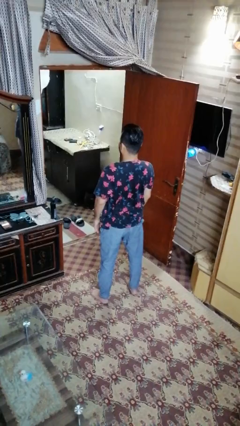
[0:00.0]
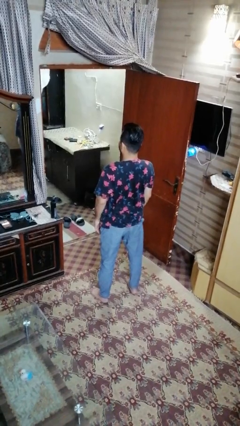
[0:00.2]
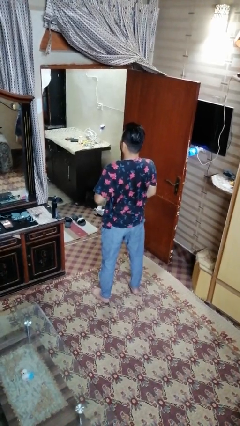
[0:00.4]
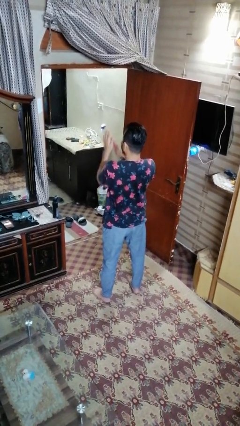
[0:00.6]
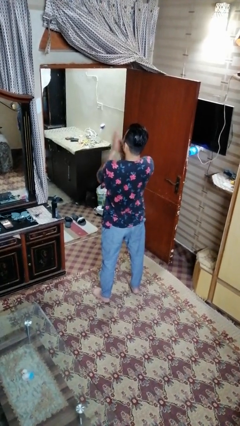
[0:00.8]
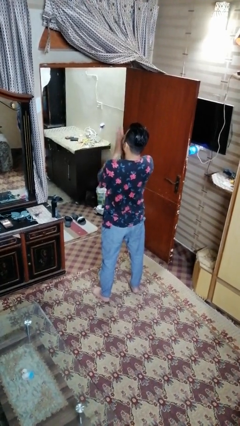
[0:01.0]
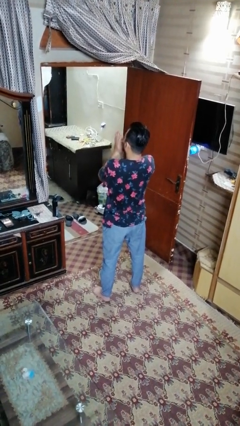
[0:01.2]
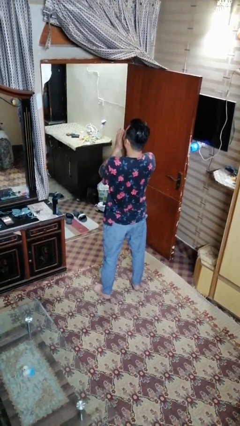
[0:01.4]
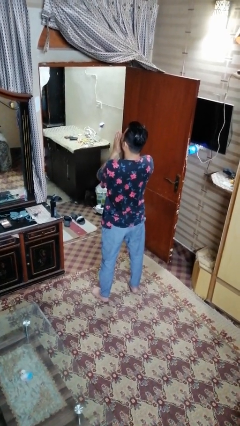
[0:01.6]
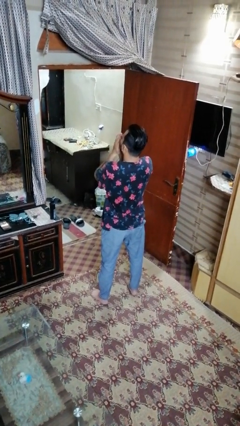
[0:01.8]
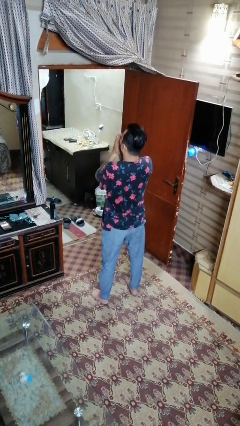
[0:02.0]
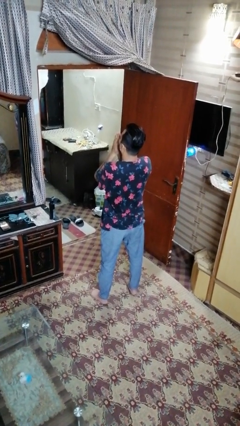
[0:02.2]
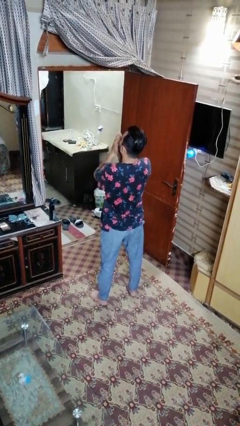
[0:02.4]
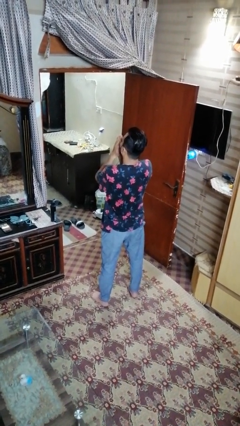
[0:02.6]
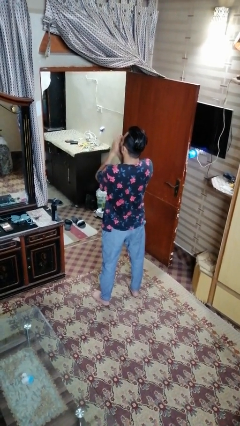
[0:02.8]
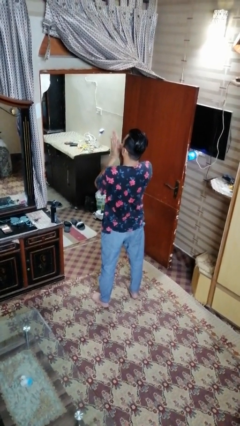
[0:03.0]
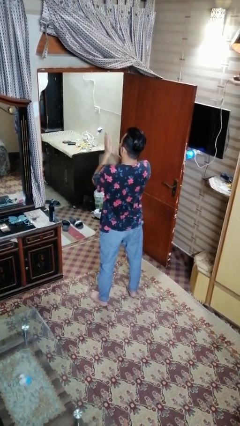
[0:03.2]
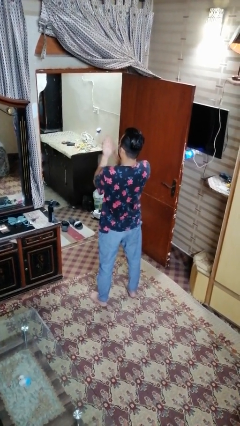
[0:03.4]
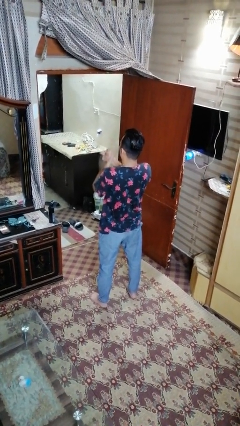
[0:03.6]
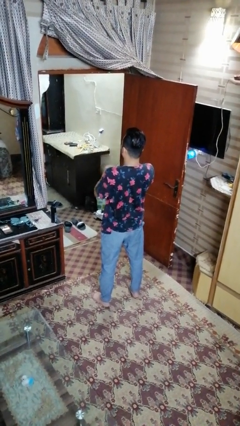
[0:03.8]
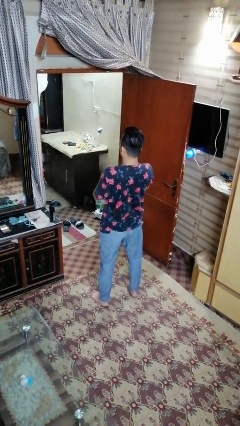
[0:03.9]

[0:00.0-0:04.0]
person blows into hands

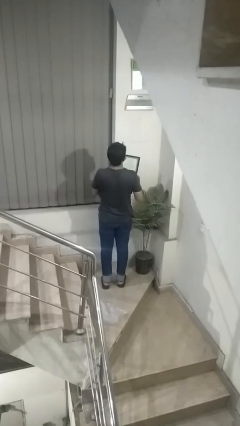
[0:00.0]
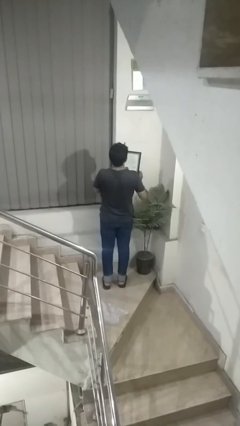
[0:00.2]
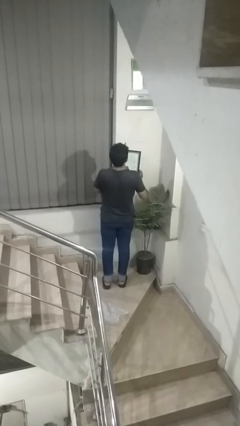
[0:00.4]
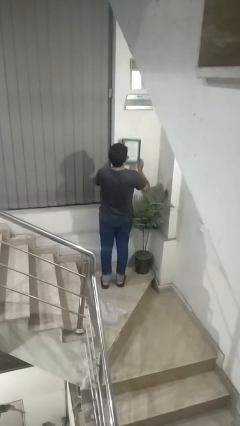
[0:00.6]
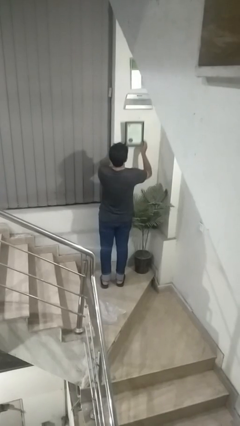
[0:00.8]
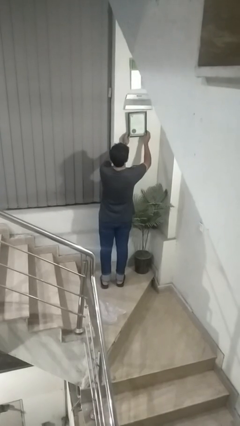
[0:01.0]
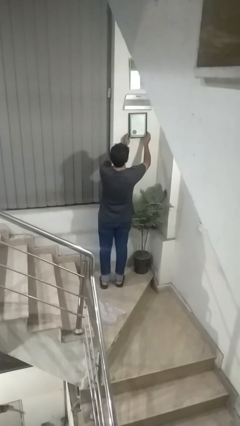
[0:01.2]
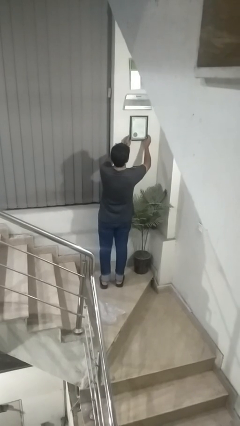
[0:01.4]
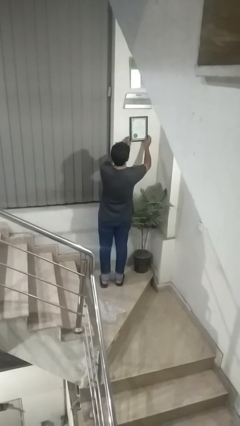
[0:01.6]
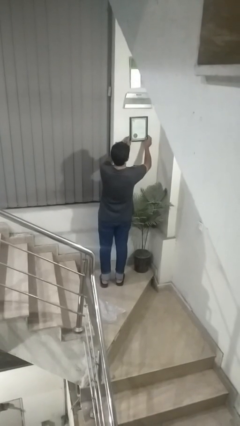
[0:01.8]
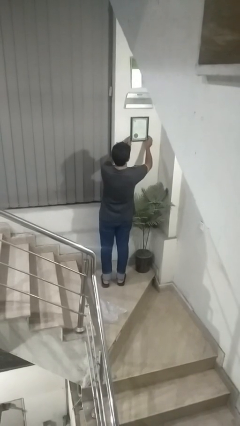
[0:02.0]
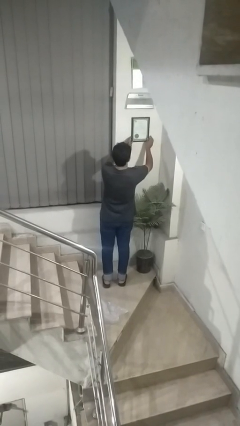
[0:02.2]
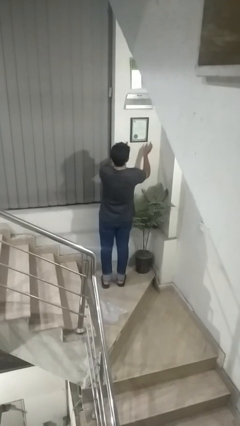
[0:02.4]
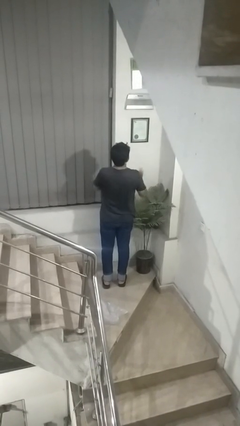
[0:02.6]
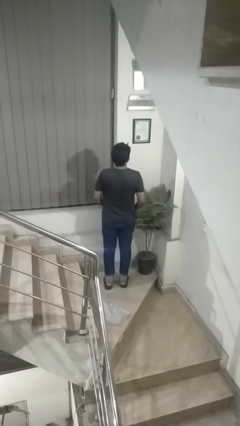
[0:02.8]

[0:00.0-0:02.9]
person puts up picture frame

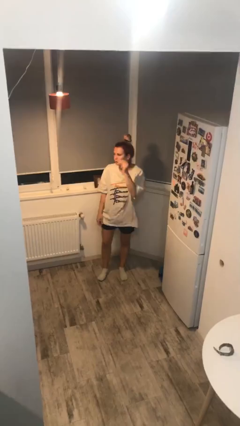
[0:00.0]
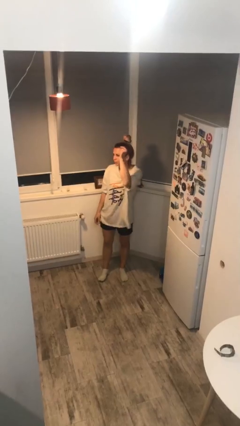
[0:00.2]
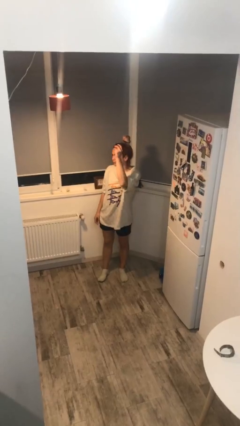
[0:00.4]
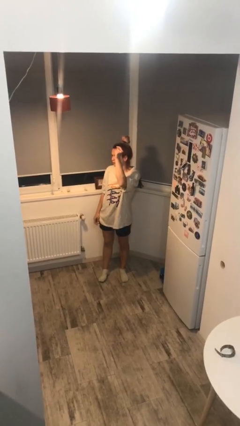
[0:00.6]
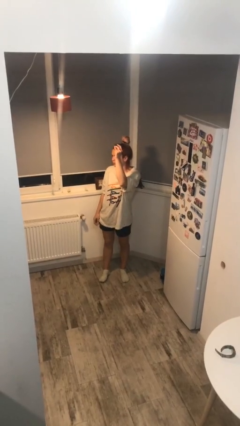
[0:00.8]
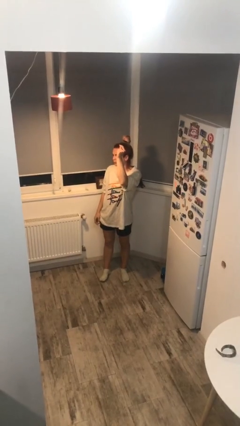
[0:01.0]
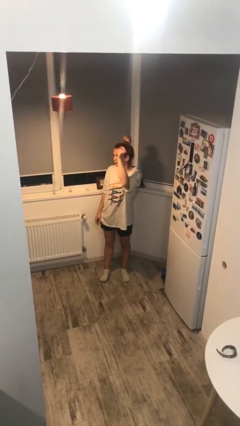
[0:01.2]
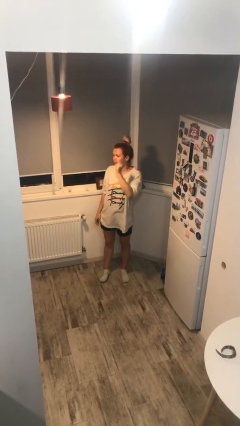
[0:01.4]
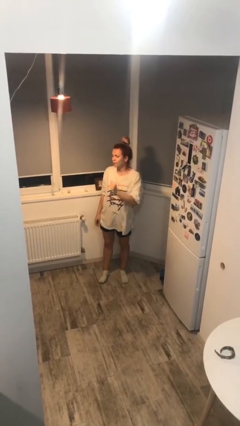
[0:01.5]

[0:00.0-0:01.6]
person snaps fingers

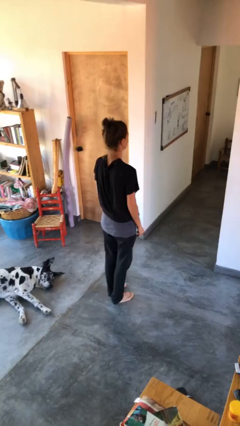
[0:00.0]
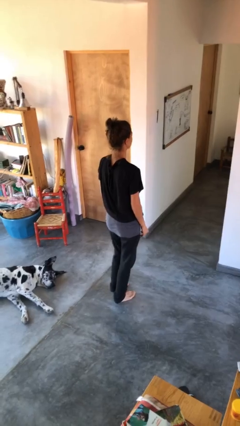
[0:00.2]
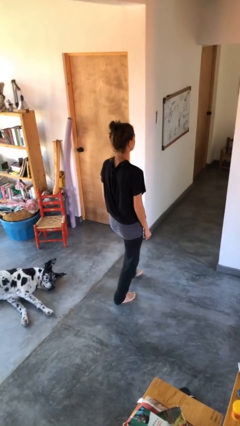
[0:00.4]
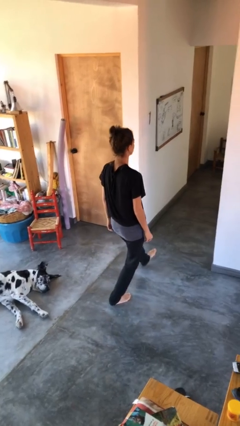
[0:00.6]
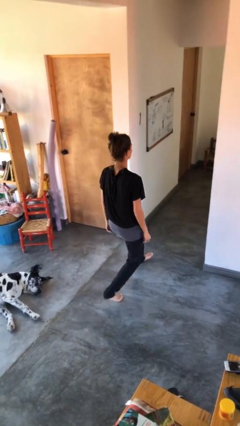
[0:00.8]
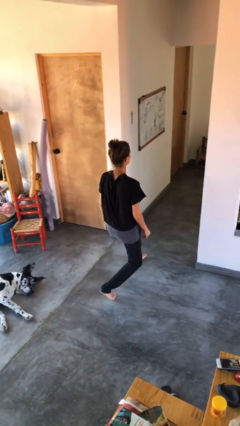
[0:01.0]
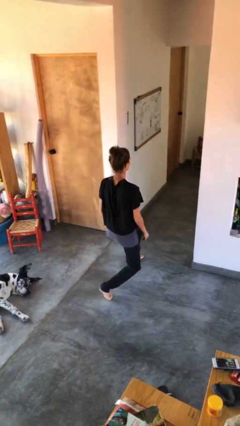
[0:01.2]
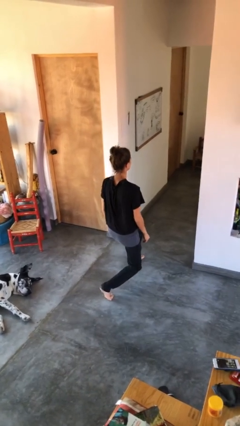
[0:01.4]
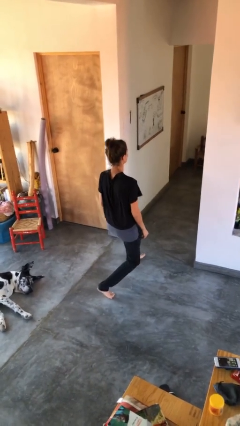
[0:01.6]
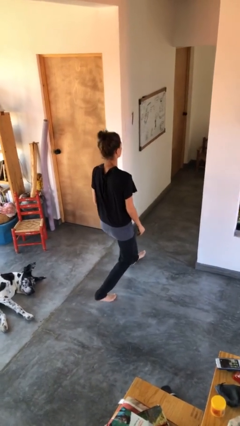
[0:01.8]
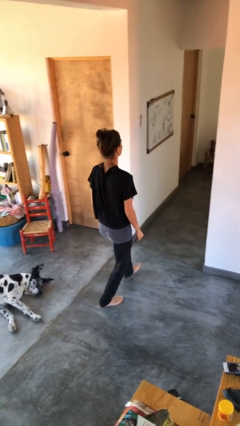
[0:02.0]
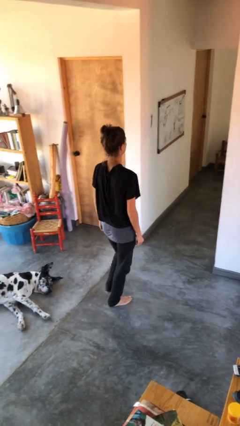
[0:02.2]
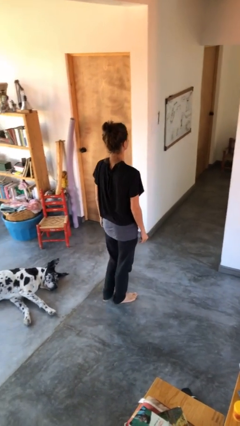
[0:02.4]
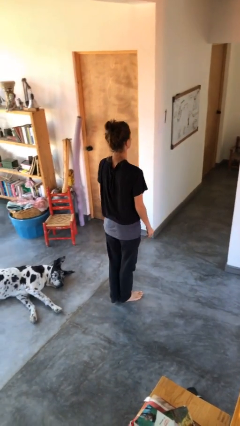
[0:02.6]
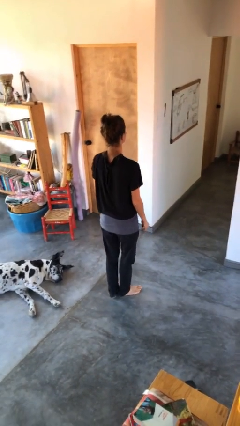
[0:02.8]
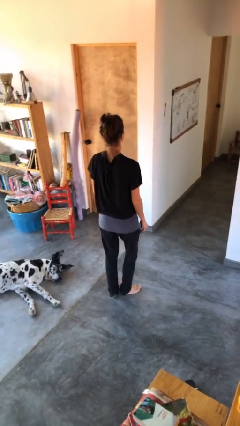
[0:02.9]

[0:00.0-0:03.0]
person exercises with lunges

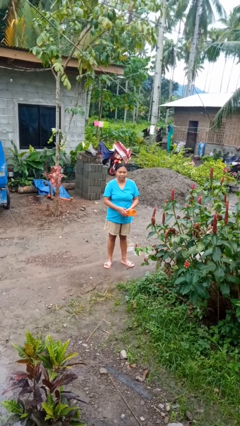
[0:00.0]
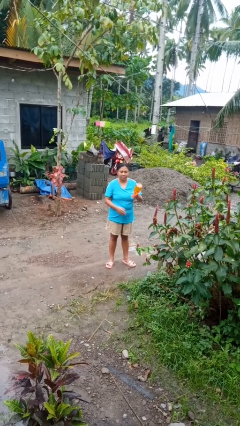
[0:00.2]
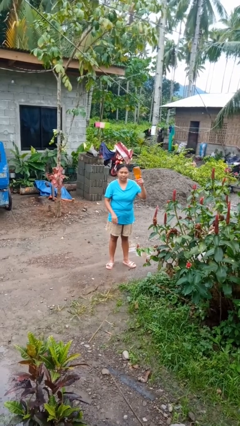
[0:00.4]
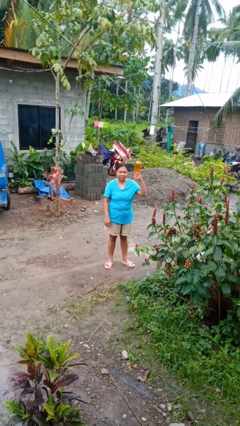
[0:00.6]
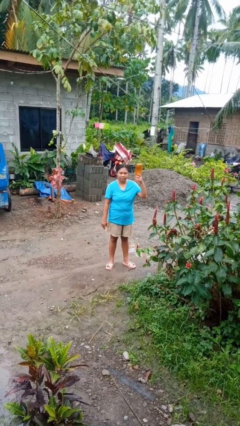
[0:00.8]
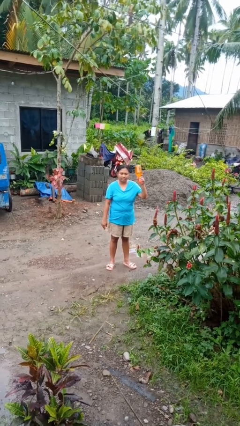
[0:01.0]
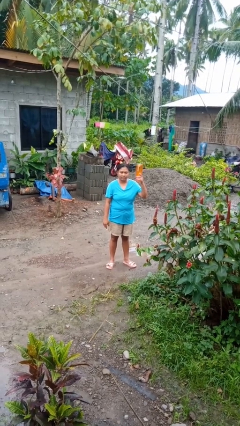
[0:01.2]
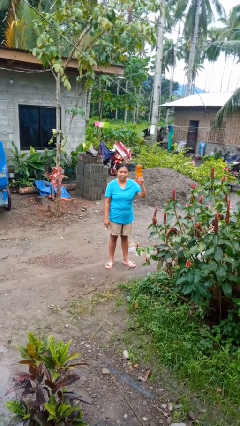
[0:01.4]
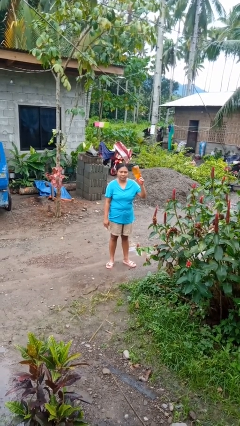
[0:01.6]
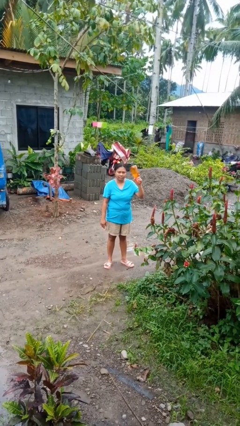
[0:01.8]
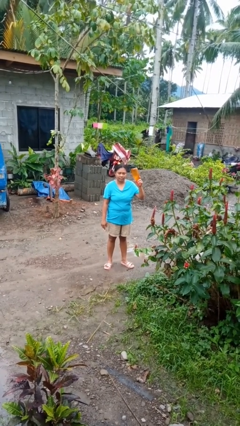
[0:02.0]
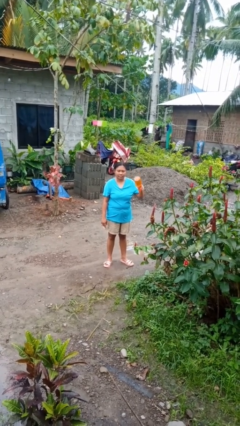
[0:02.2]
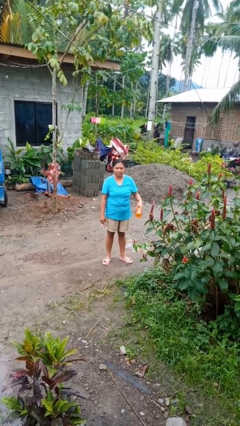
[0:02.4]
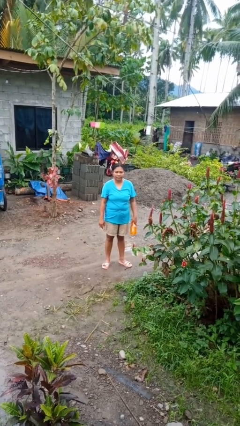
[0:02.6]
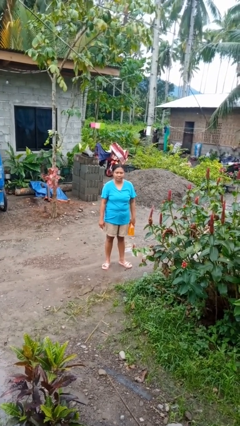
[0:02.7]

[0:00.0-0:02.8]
person holds object above head

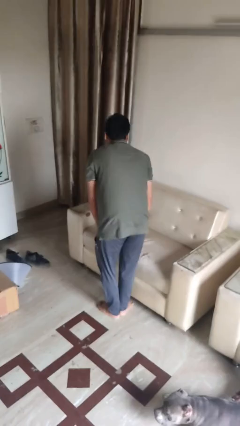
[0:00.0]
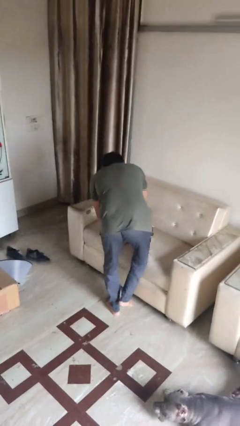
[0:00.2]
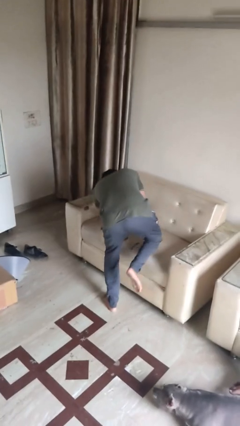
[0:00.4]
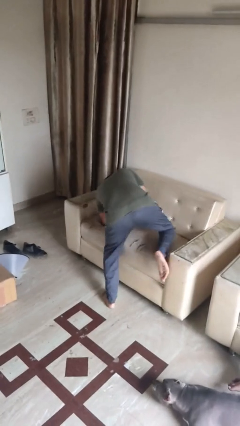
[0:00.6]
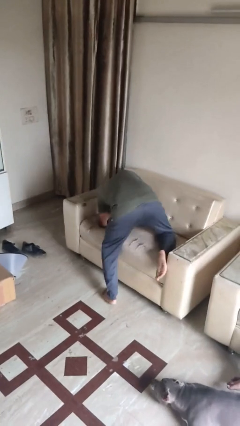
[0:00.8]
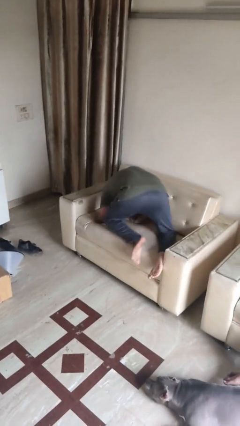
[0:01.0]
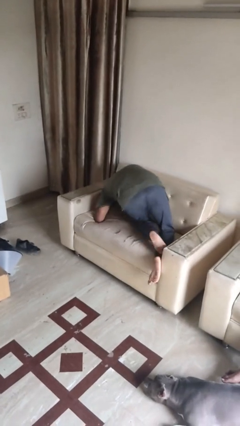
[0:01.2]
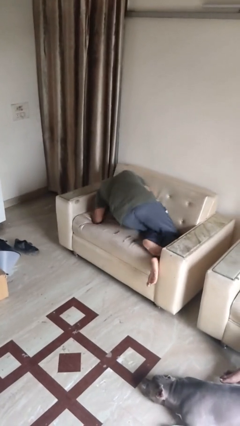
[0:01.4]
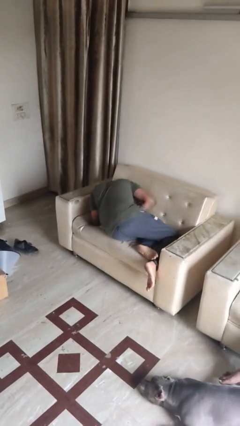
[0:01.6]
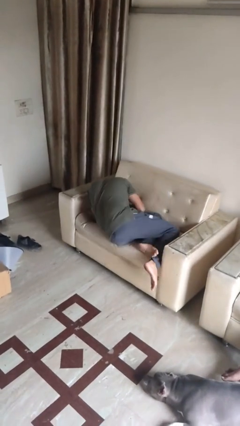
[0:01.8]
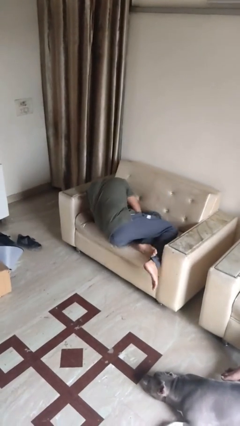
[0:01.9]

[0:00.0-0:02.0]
person lies down on bed

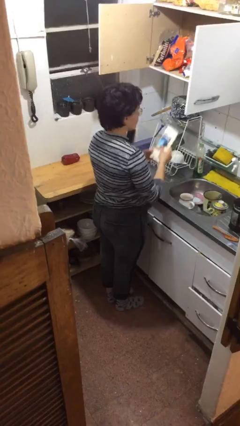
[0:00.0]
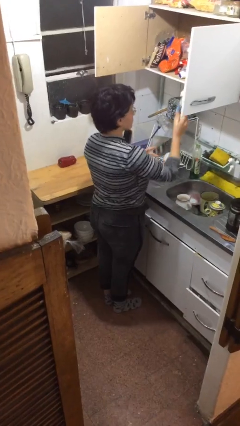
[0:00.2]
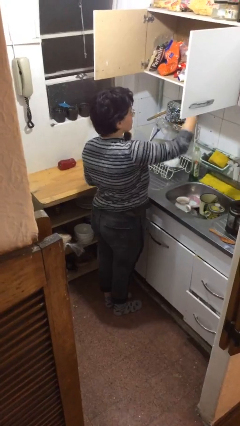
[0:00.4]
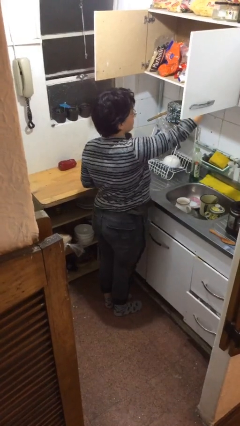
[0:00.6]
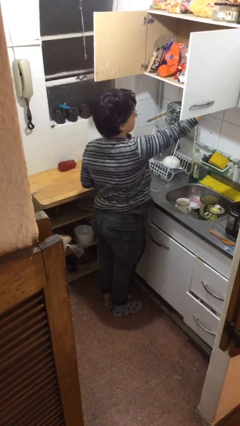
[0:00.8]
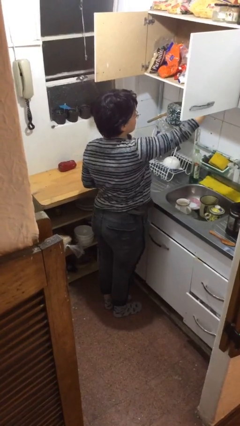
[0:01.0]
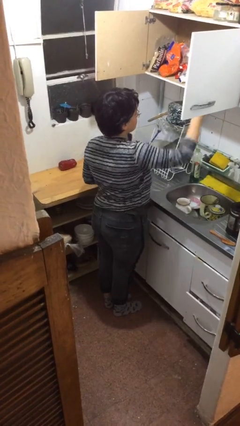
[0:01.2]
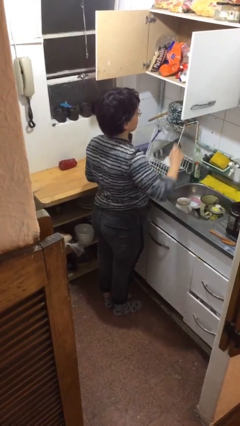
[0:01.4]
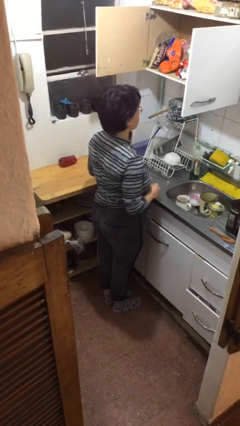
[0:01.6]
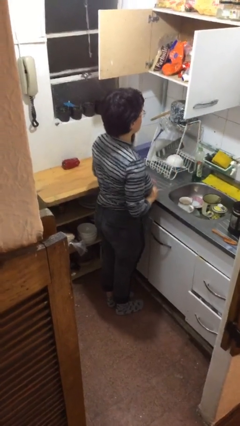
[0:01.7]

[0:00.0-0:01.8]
person puts object in cabinet
